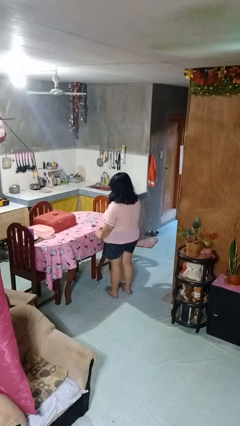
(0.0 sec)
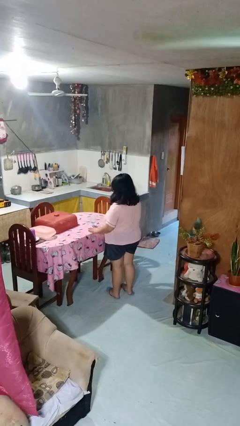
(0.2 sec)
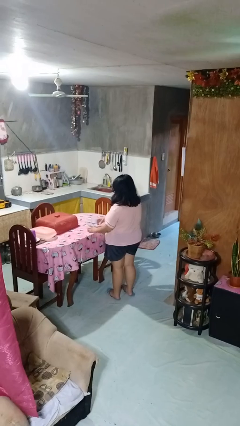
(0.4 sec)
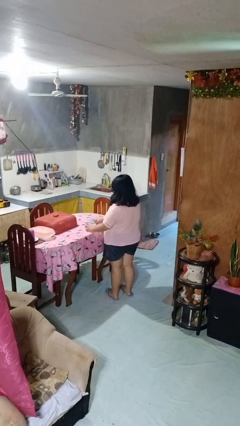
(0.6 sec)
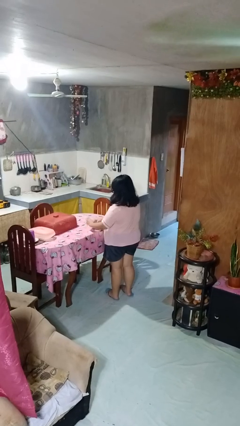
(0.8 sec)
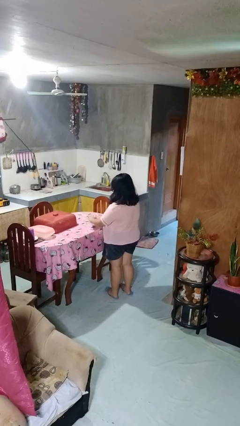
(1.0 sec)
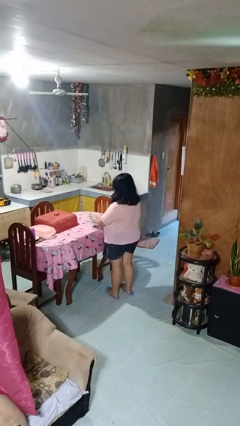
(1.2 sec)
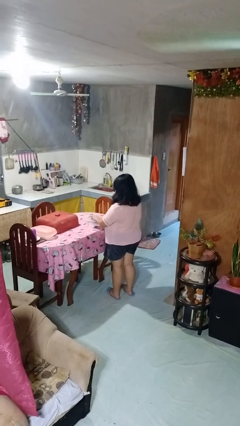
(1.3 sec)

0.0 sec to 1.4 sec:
person closes jar

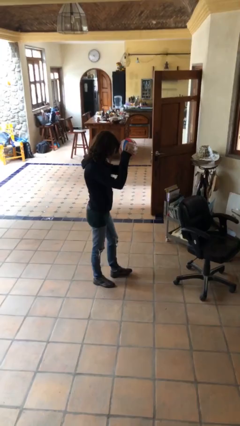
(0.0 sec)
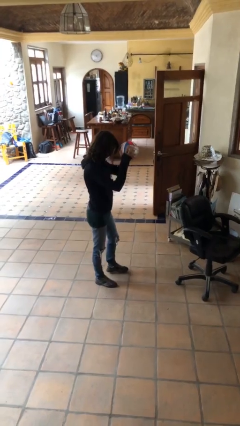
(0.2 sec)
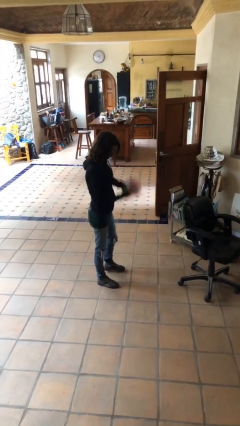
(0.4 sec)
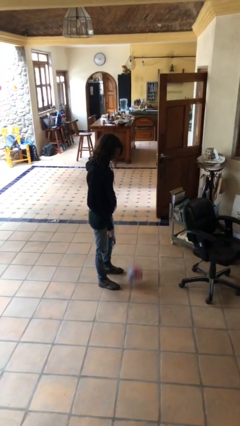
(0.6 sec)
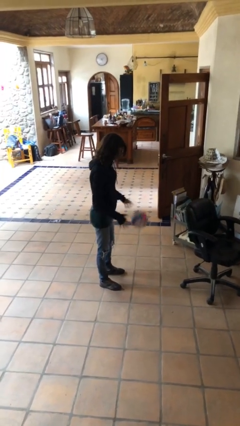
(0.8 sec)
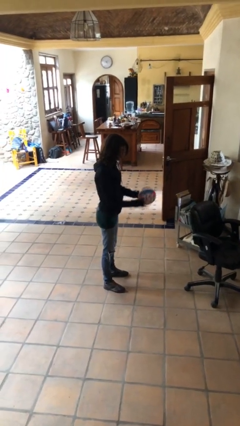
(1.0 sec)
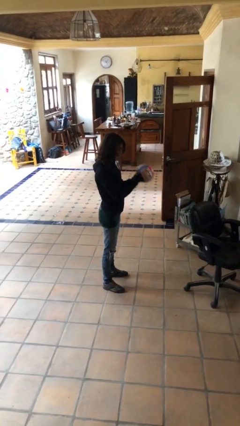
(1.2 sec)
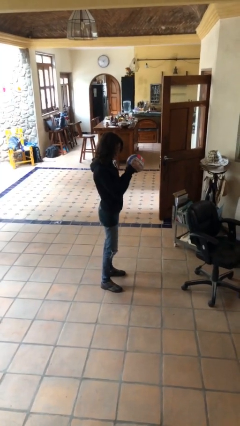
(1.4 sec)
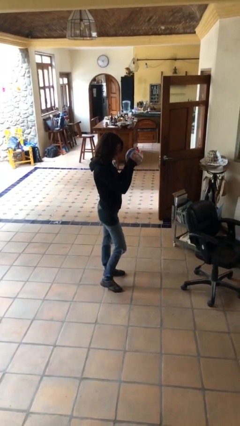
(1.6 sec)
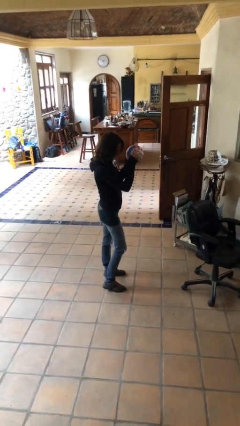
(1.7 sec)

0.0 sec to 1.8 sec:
person bounces ball on floor

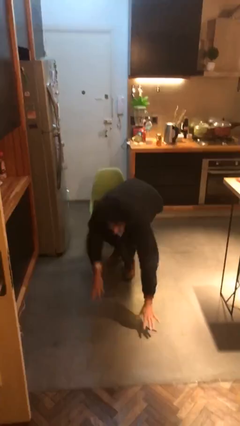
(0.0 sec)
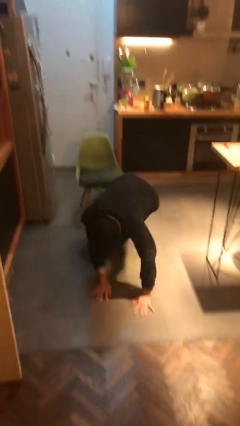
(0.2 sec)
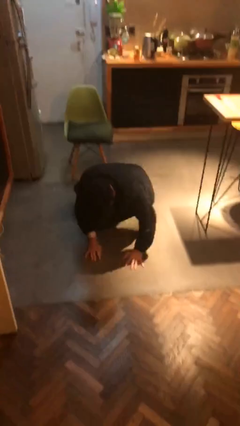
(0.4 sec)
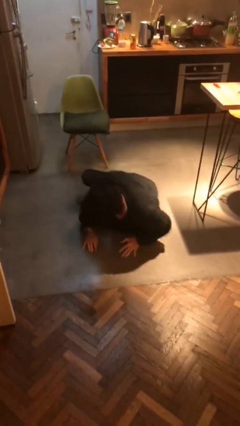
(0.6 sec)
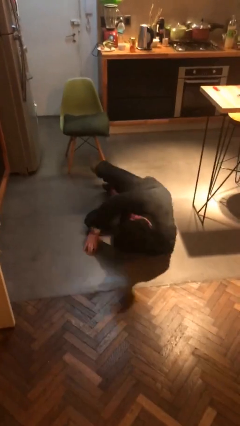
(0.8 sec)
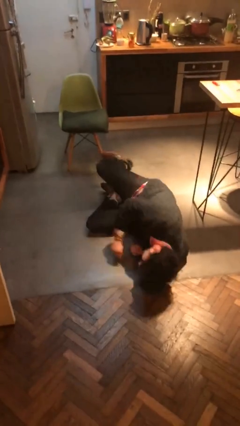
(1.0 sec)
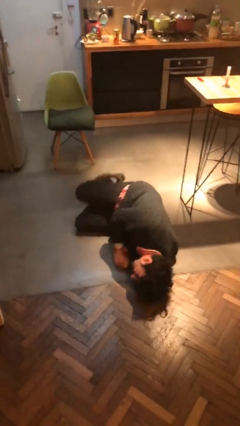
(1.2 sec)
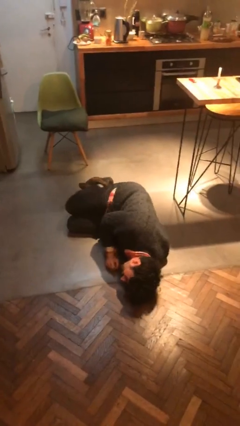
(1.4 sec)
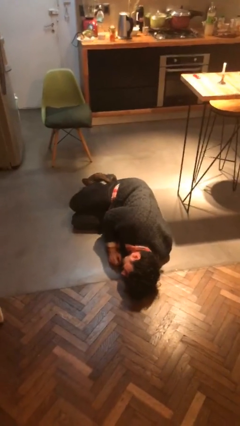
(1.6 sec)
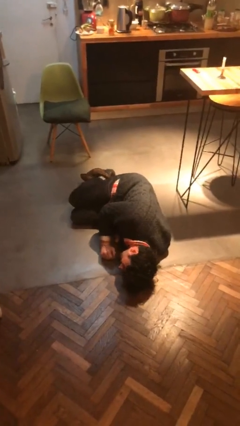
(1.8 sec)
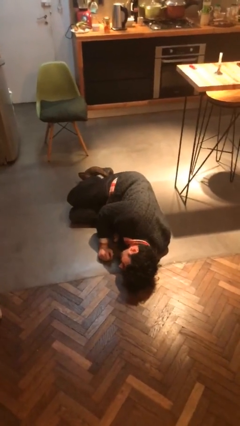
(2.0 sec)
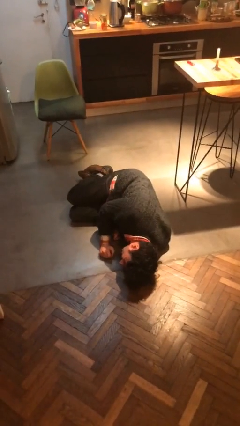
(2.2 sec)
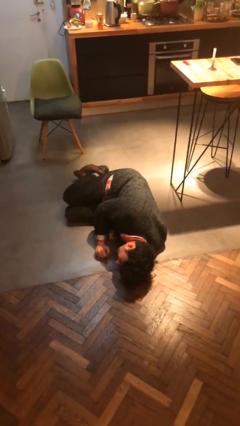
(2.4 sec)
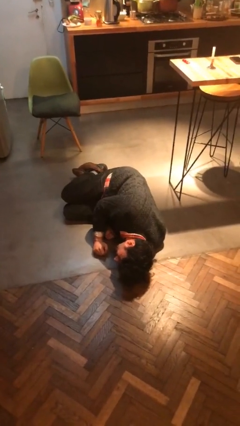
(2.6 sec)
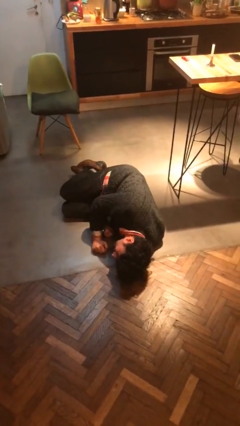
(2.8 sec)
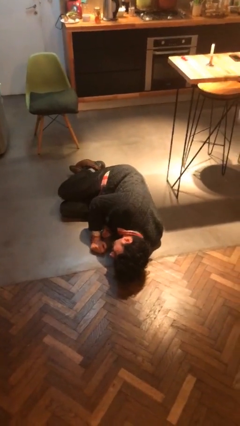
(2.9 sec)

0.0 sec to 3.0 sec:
person falls from chair

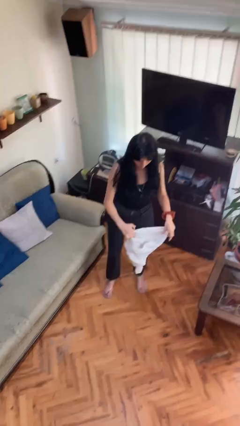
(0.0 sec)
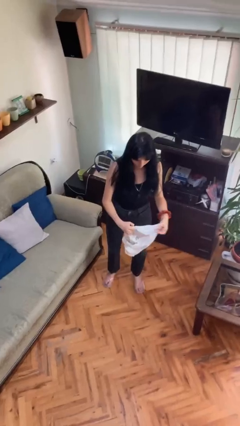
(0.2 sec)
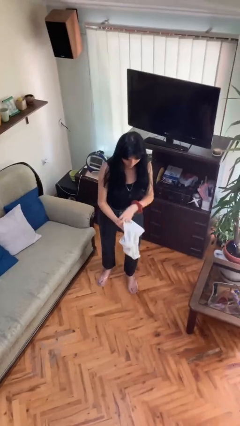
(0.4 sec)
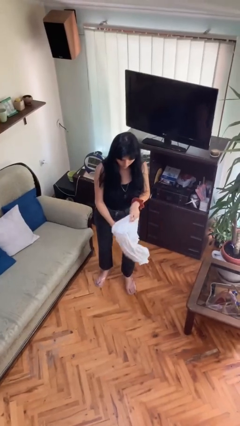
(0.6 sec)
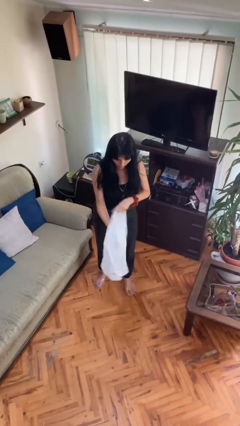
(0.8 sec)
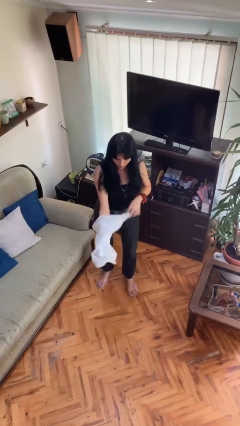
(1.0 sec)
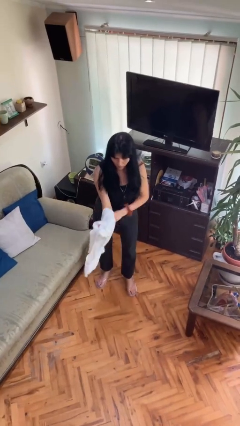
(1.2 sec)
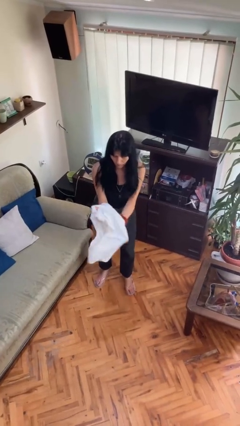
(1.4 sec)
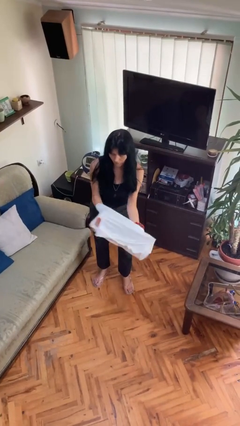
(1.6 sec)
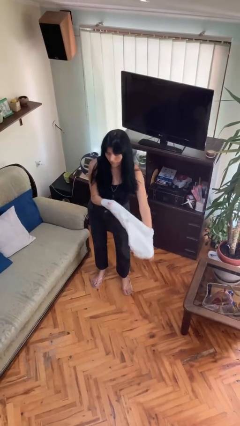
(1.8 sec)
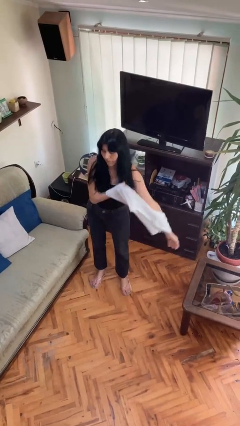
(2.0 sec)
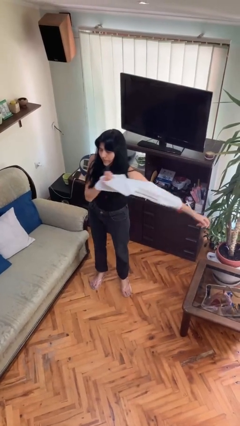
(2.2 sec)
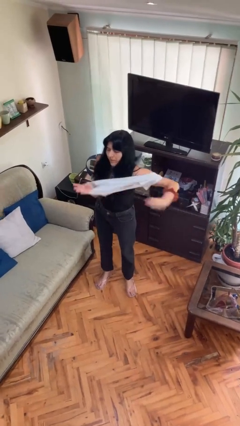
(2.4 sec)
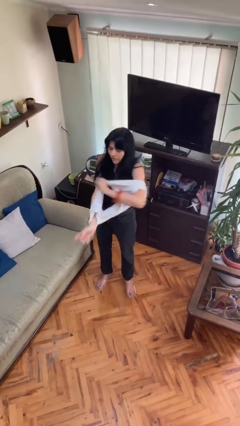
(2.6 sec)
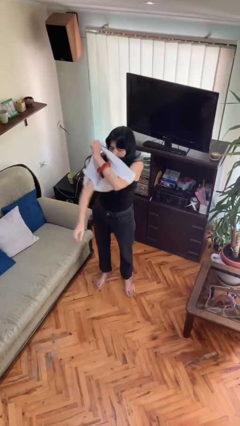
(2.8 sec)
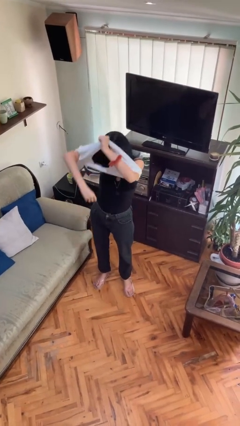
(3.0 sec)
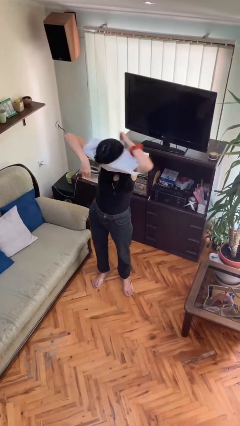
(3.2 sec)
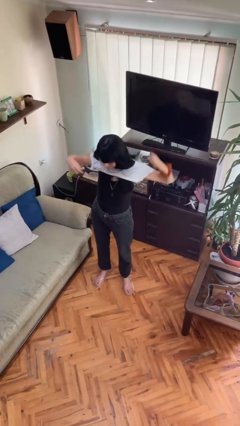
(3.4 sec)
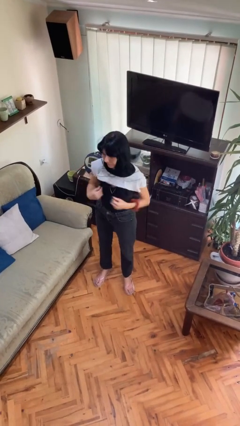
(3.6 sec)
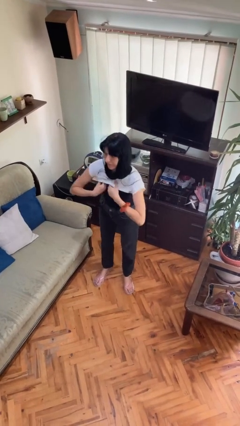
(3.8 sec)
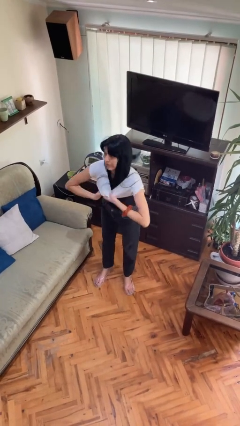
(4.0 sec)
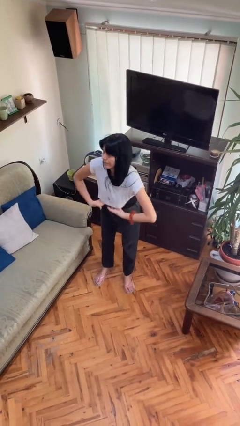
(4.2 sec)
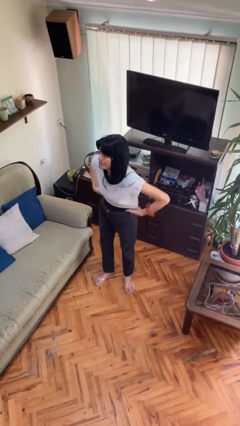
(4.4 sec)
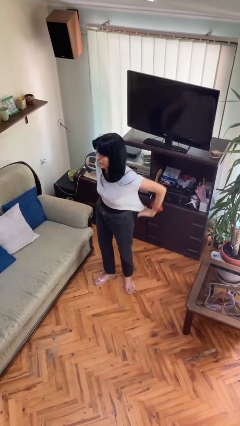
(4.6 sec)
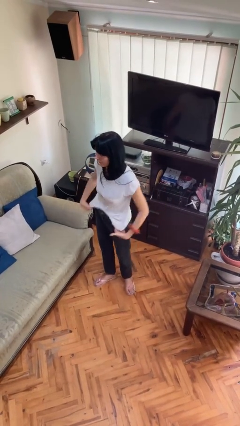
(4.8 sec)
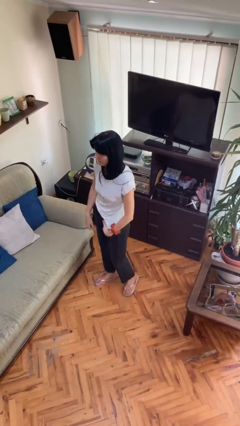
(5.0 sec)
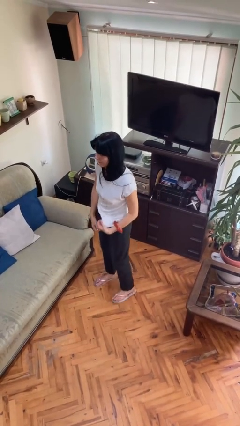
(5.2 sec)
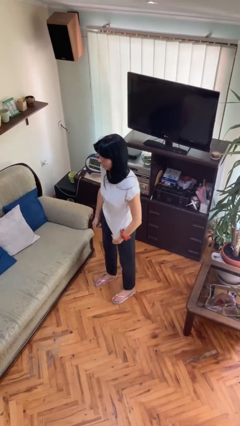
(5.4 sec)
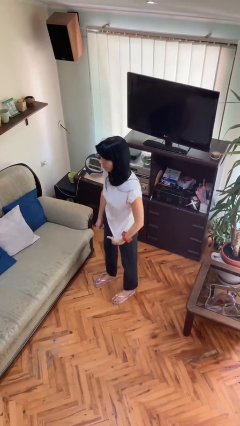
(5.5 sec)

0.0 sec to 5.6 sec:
person puts on shirt

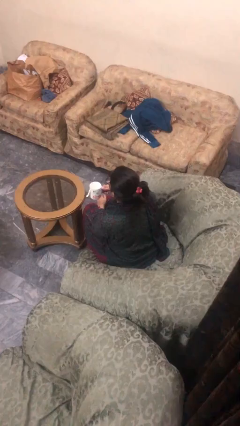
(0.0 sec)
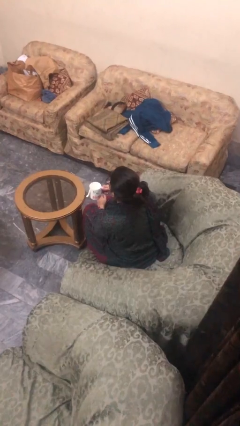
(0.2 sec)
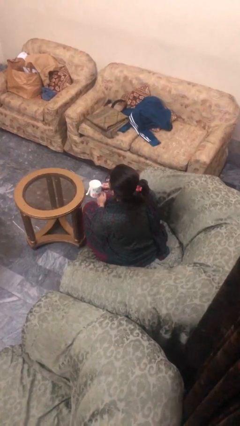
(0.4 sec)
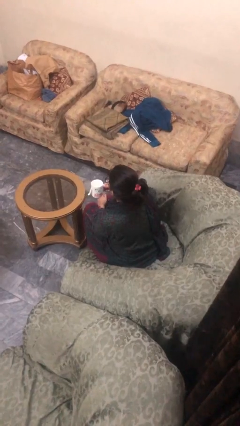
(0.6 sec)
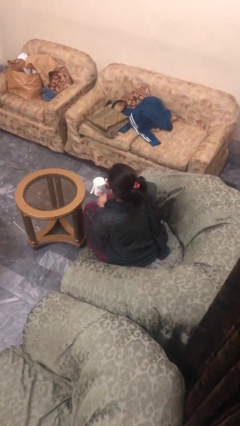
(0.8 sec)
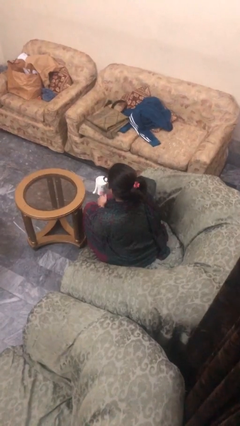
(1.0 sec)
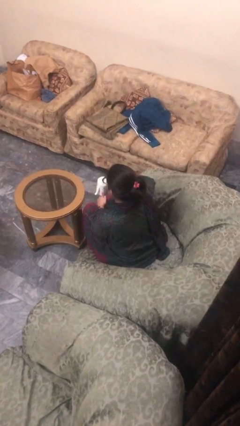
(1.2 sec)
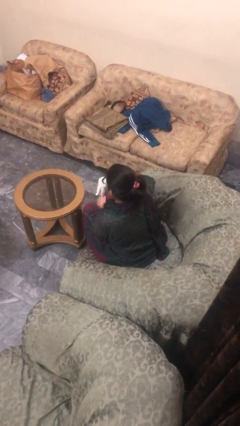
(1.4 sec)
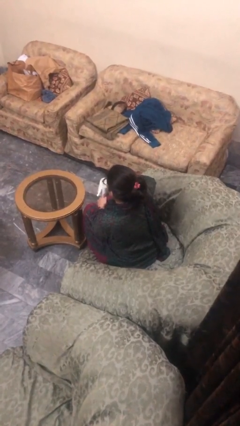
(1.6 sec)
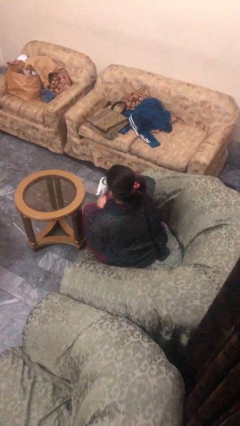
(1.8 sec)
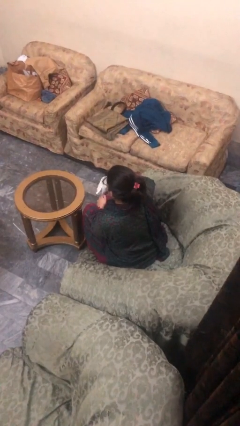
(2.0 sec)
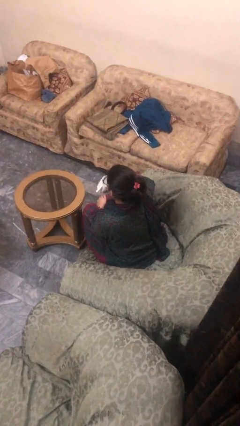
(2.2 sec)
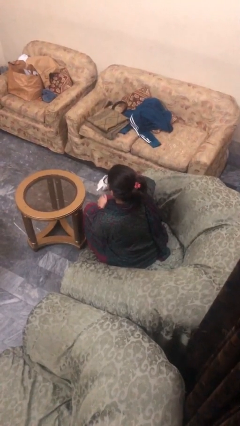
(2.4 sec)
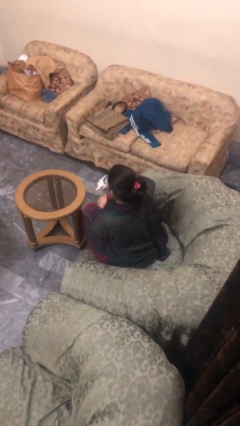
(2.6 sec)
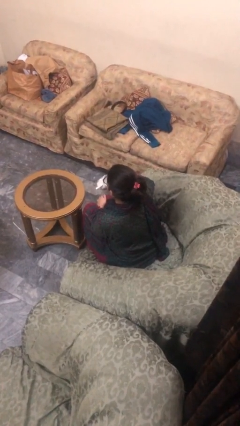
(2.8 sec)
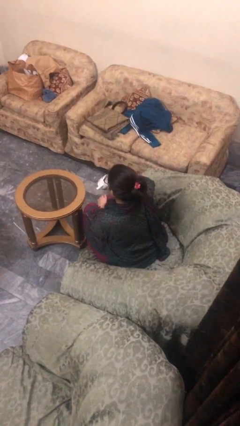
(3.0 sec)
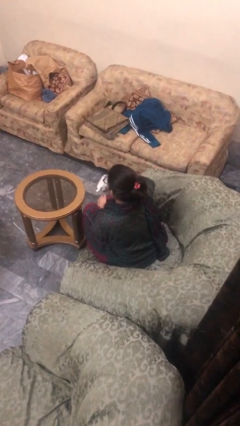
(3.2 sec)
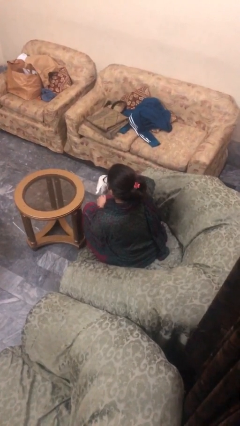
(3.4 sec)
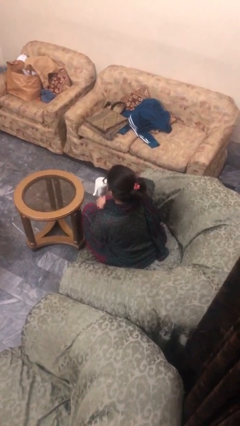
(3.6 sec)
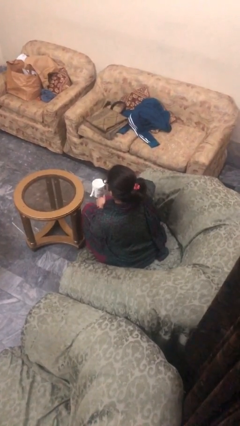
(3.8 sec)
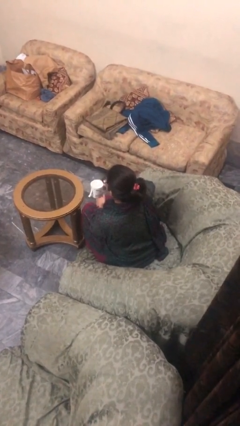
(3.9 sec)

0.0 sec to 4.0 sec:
person drinks from mug

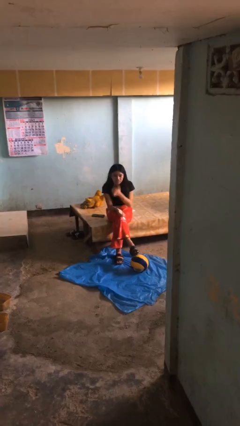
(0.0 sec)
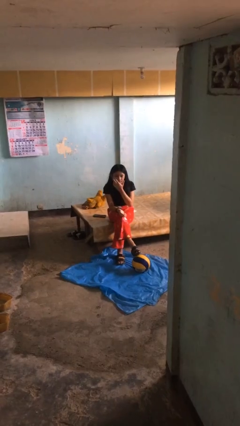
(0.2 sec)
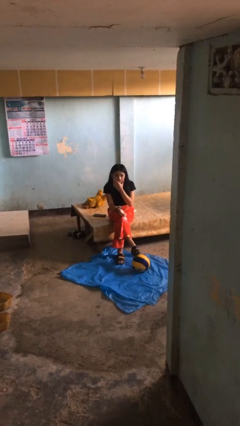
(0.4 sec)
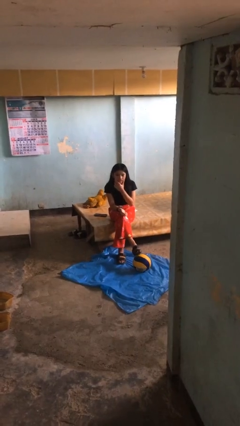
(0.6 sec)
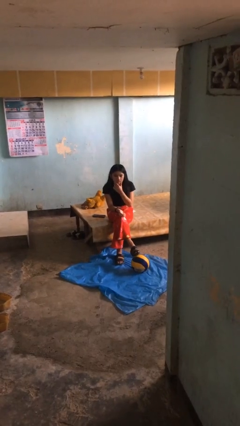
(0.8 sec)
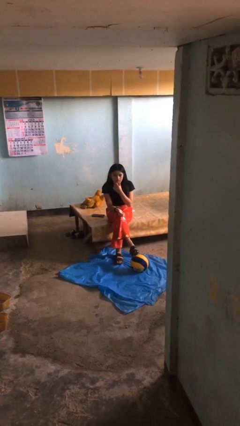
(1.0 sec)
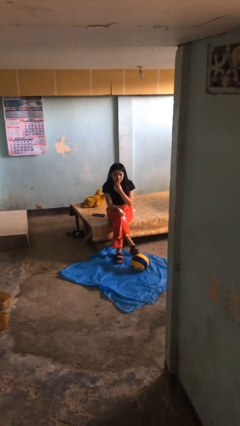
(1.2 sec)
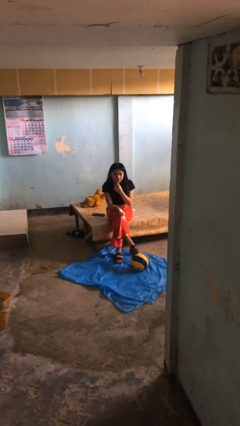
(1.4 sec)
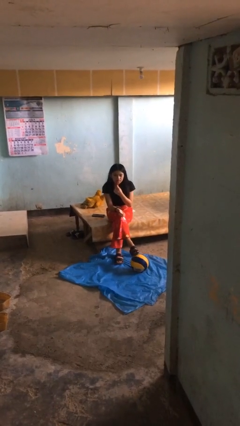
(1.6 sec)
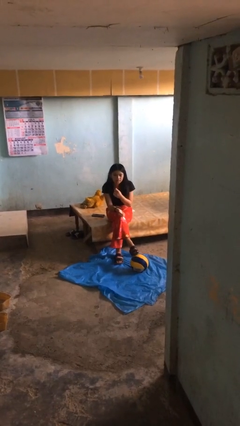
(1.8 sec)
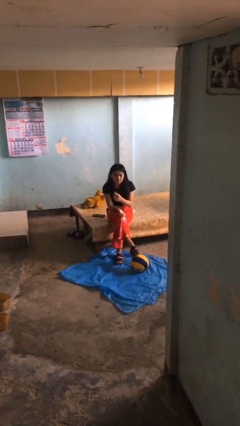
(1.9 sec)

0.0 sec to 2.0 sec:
person strokes chin
